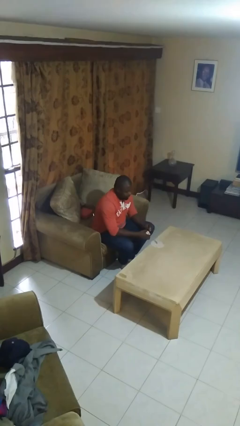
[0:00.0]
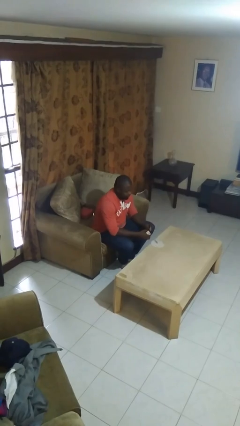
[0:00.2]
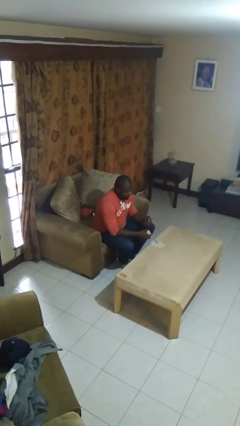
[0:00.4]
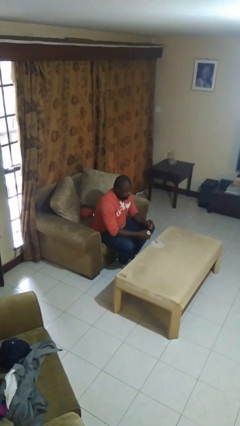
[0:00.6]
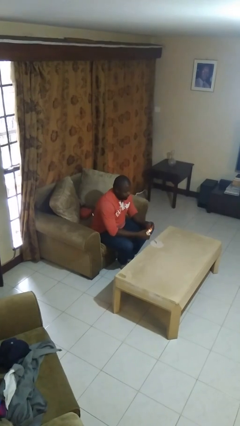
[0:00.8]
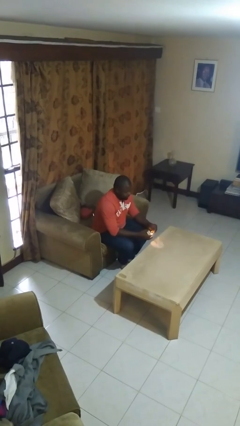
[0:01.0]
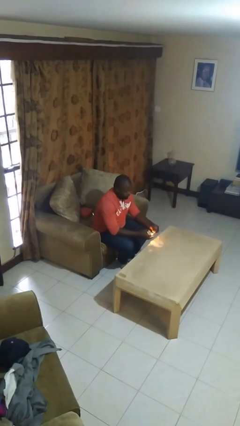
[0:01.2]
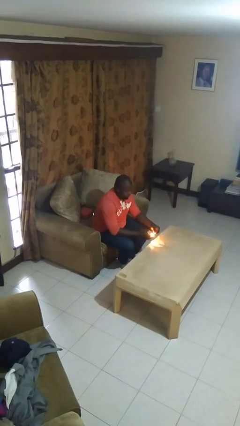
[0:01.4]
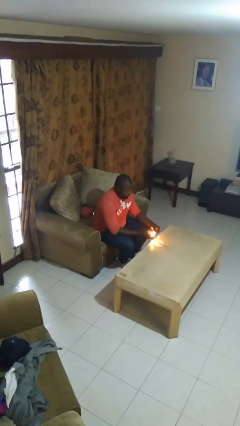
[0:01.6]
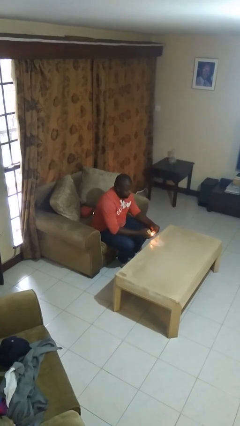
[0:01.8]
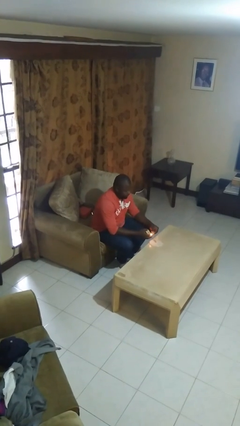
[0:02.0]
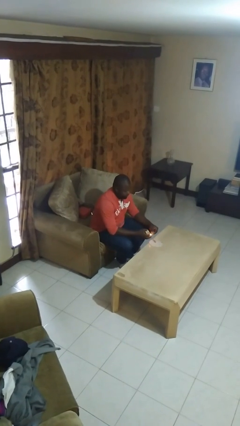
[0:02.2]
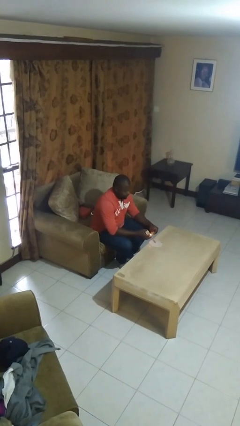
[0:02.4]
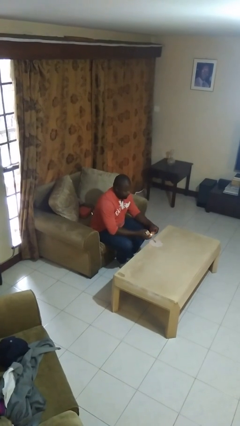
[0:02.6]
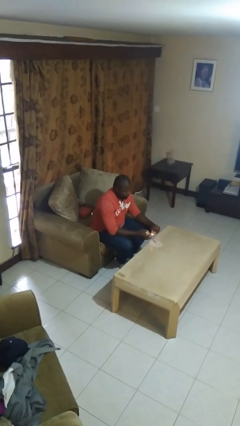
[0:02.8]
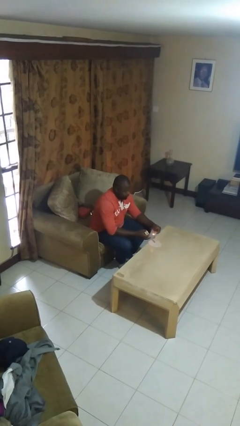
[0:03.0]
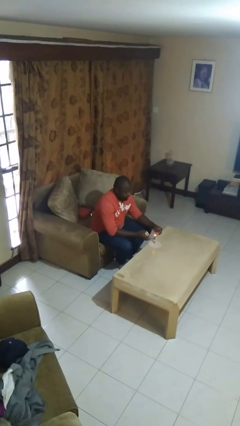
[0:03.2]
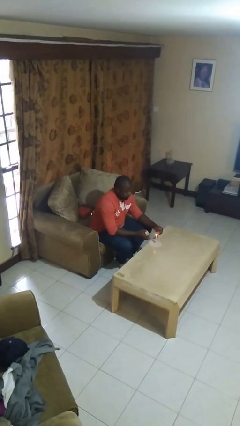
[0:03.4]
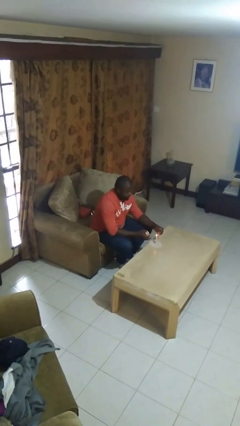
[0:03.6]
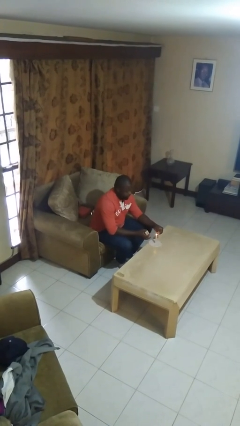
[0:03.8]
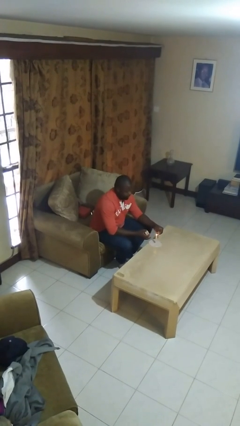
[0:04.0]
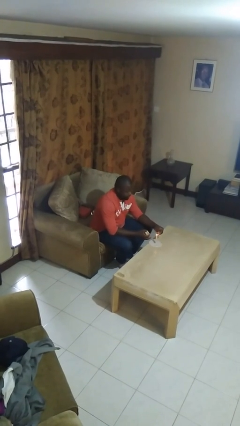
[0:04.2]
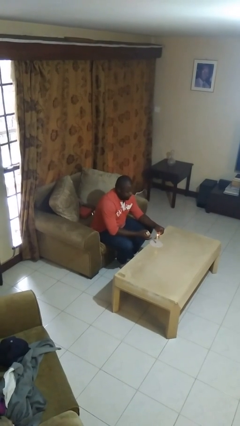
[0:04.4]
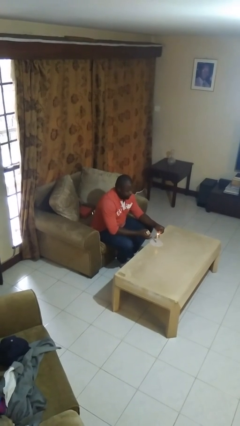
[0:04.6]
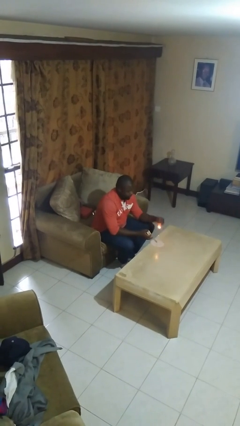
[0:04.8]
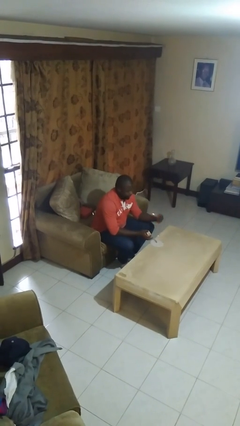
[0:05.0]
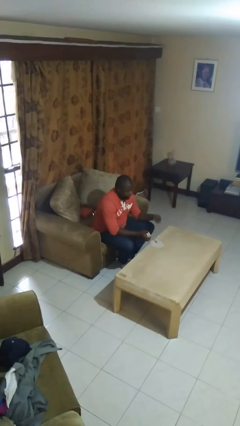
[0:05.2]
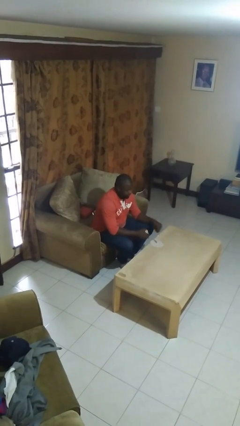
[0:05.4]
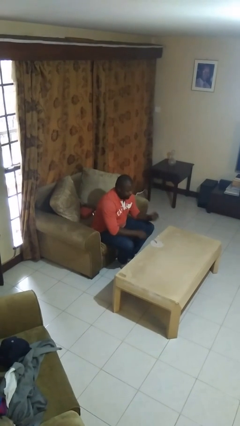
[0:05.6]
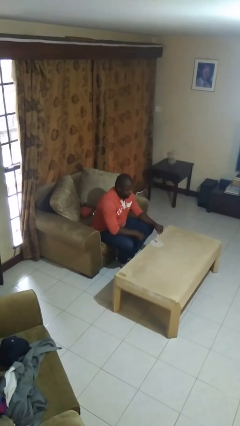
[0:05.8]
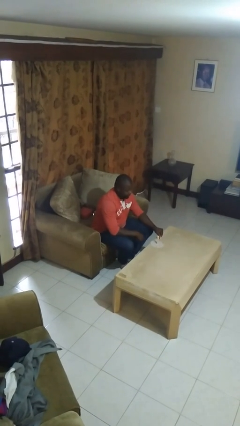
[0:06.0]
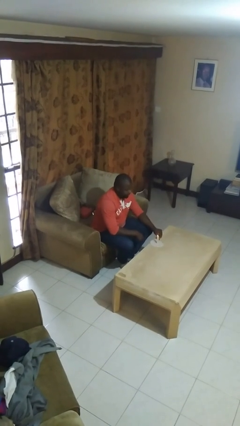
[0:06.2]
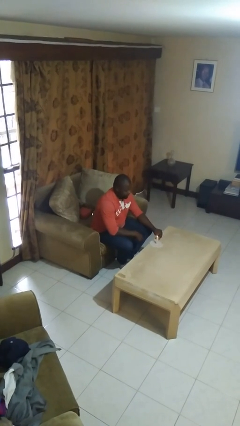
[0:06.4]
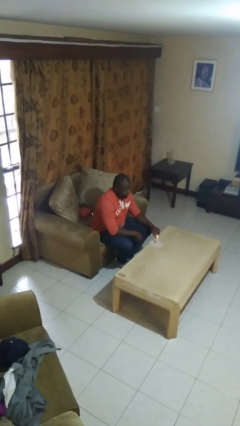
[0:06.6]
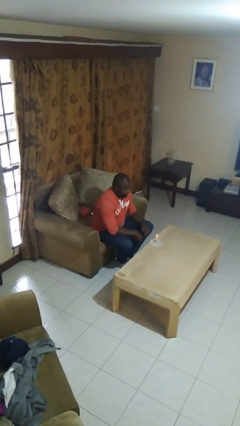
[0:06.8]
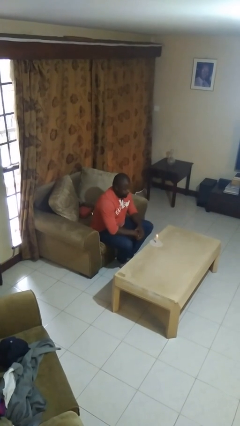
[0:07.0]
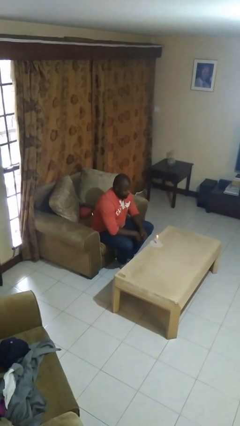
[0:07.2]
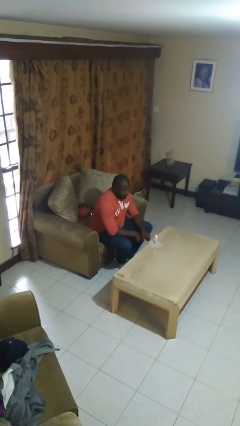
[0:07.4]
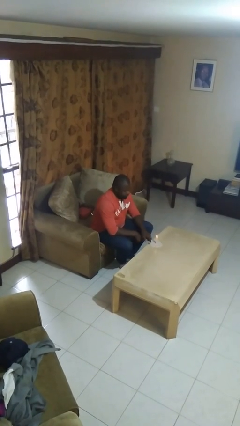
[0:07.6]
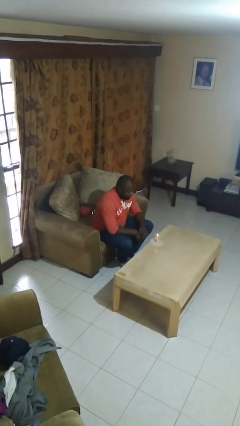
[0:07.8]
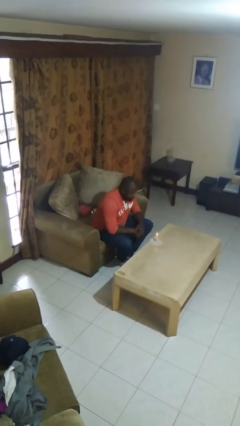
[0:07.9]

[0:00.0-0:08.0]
person lights candle

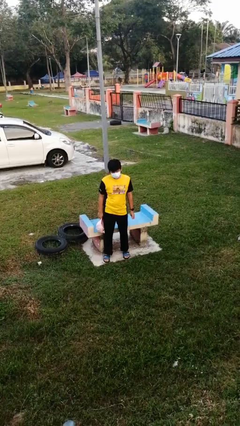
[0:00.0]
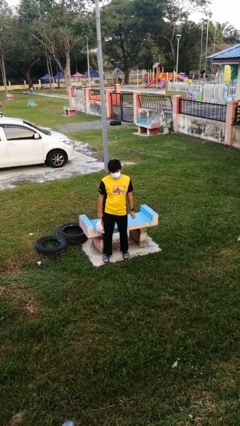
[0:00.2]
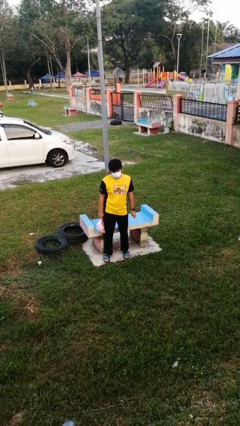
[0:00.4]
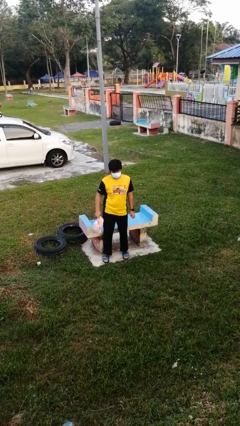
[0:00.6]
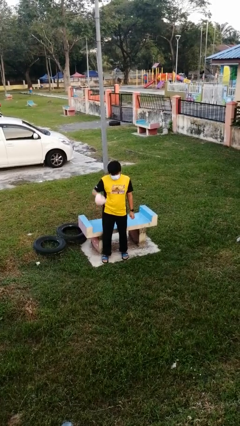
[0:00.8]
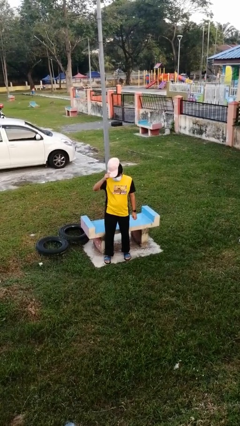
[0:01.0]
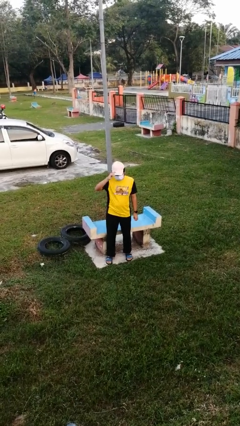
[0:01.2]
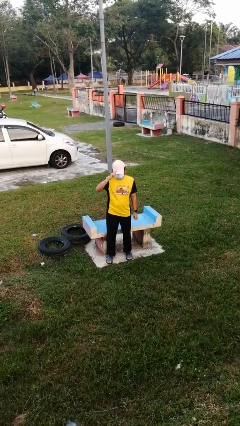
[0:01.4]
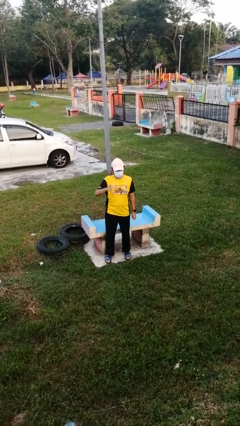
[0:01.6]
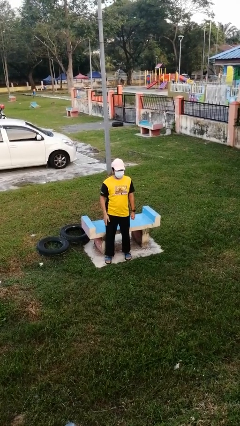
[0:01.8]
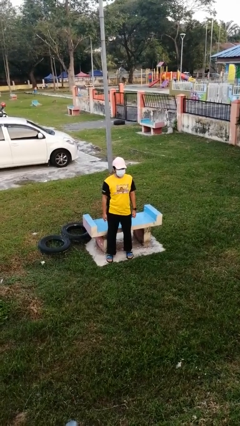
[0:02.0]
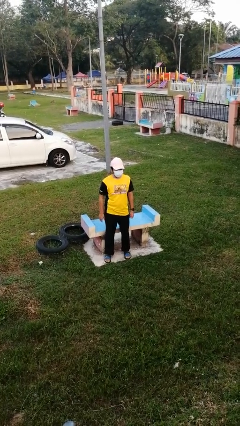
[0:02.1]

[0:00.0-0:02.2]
person puts on hat

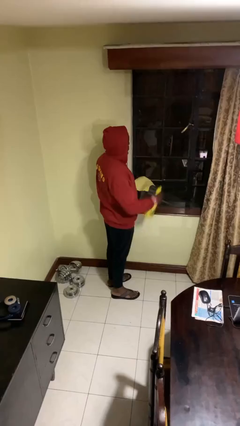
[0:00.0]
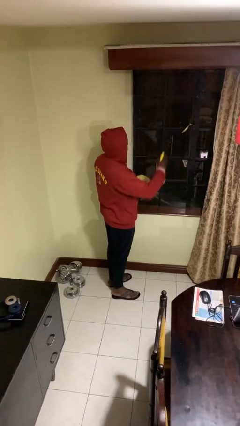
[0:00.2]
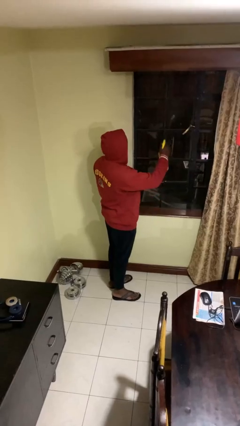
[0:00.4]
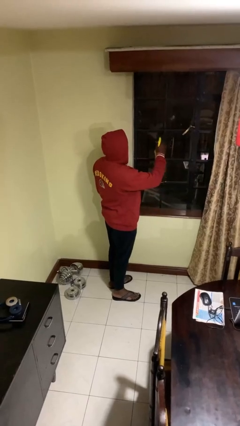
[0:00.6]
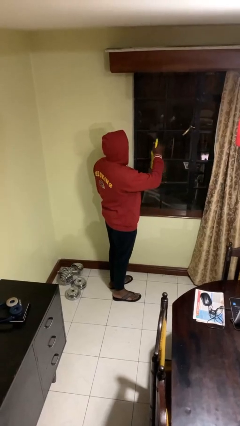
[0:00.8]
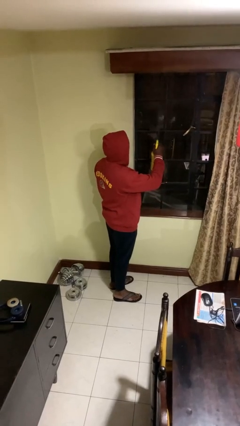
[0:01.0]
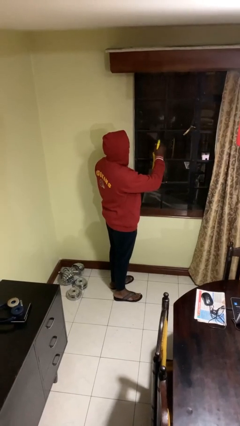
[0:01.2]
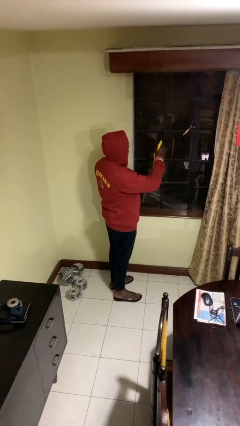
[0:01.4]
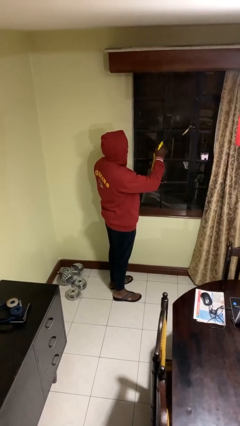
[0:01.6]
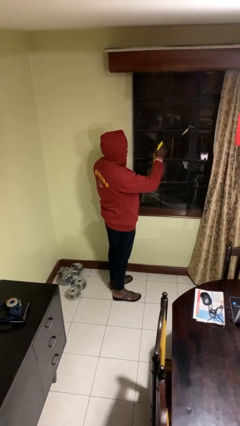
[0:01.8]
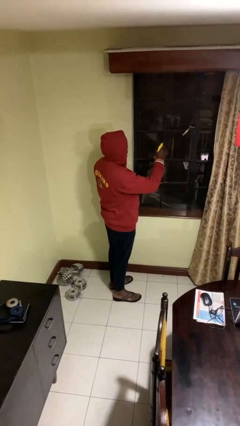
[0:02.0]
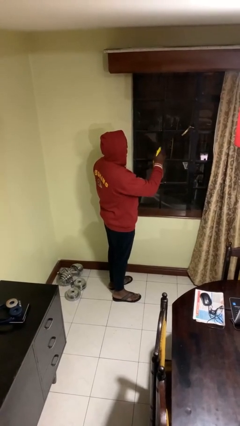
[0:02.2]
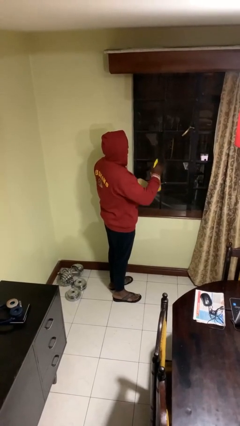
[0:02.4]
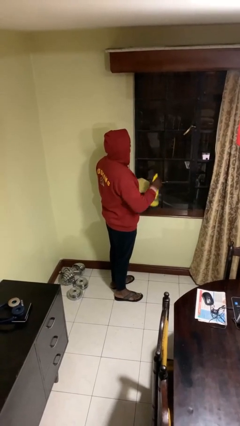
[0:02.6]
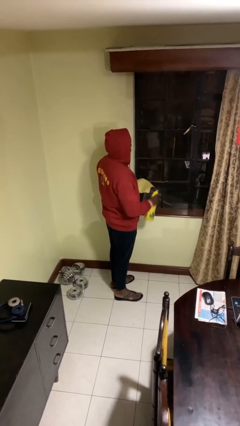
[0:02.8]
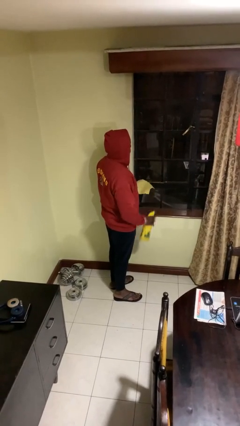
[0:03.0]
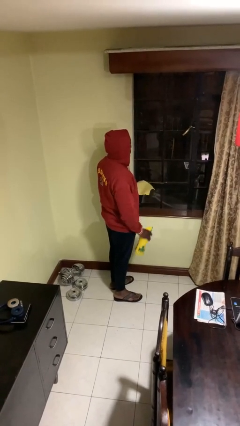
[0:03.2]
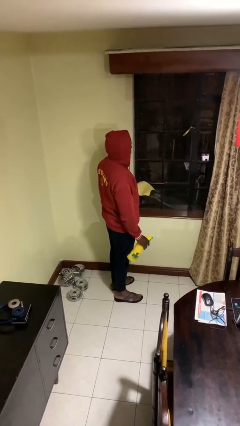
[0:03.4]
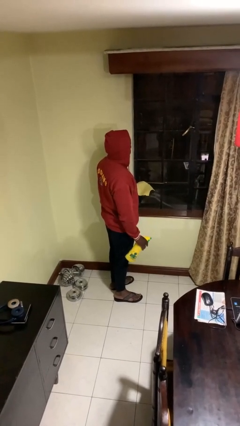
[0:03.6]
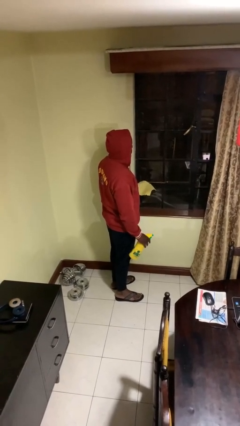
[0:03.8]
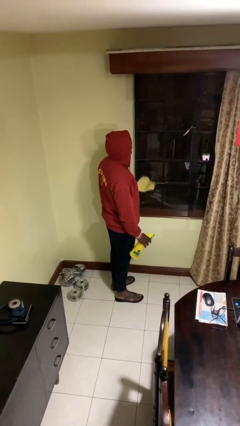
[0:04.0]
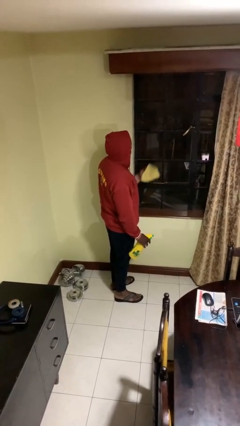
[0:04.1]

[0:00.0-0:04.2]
person sprays from bottle

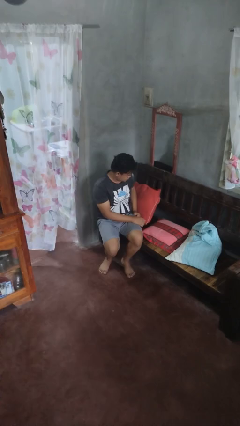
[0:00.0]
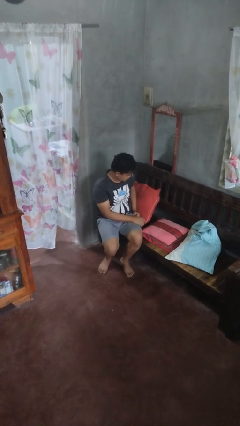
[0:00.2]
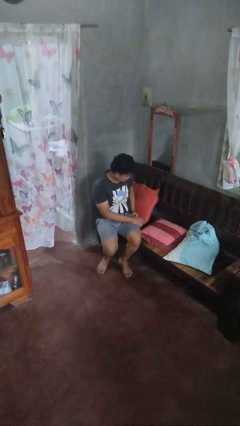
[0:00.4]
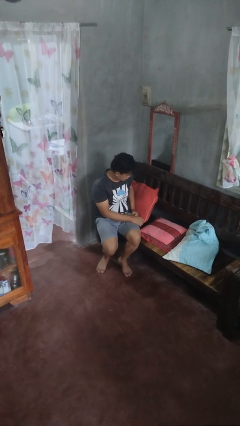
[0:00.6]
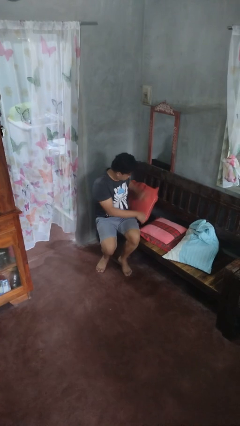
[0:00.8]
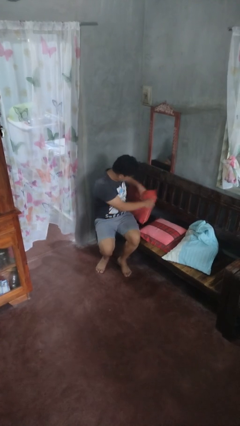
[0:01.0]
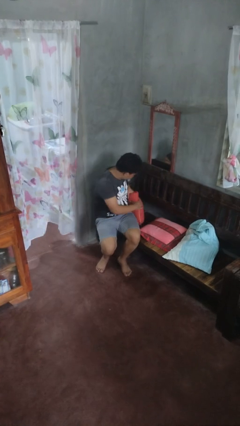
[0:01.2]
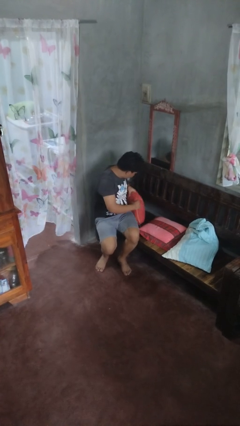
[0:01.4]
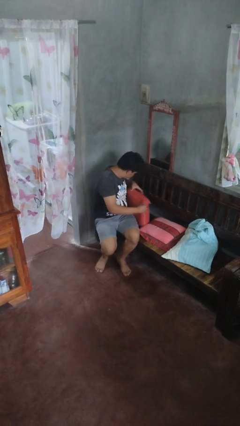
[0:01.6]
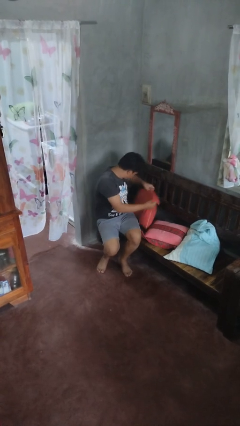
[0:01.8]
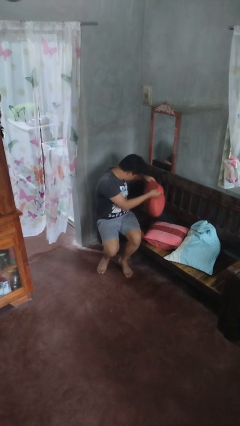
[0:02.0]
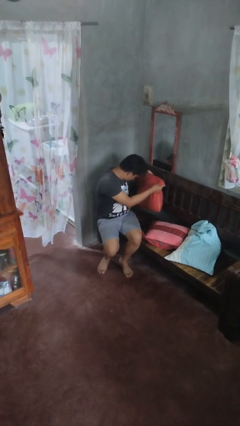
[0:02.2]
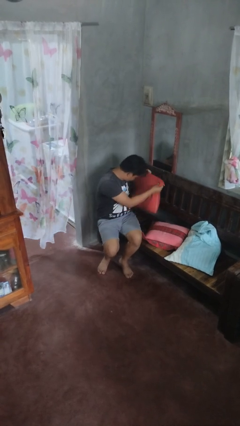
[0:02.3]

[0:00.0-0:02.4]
person searches in couch

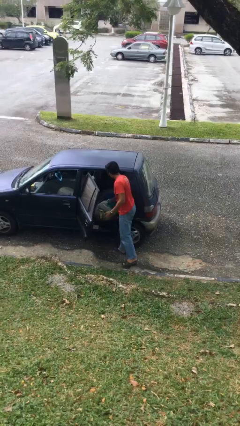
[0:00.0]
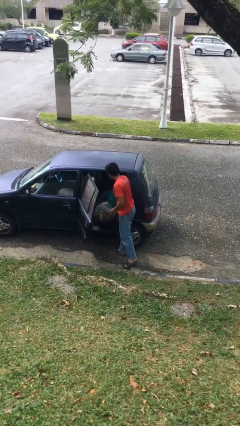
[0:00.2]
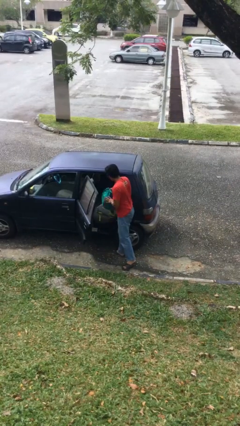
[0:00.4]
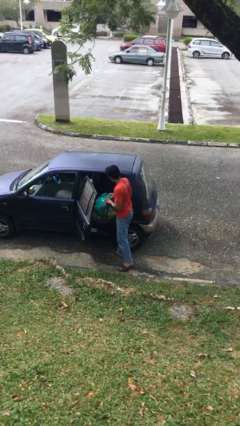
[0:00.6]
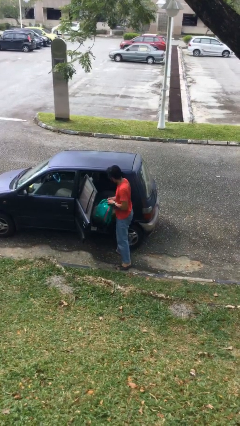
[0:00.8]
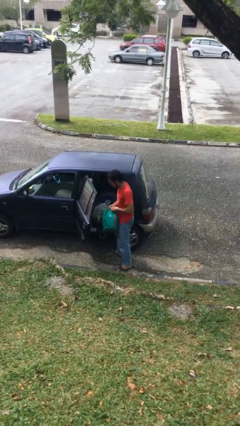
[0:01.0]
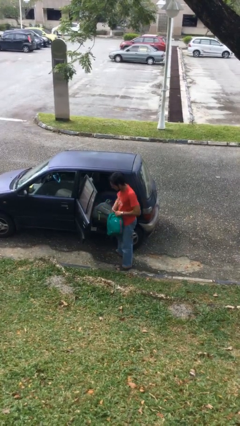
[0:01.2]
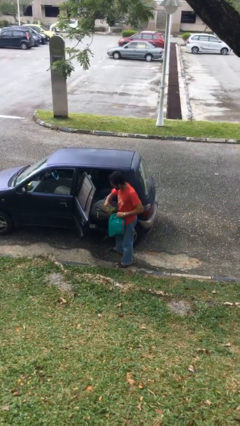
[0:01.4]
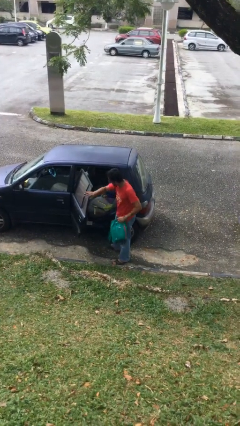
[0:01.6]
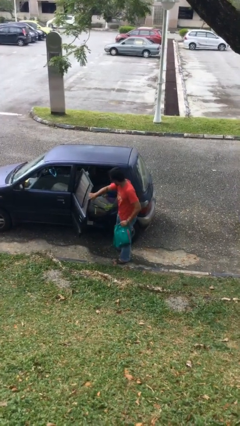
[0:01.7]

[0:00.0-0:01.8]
person unloads car
